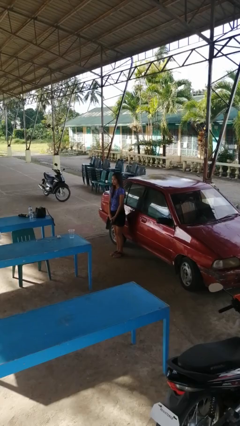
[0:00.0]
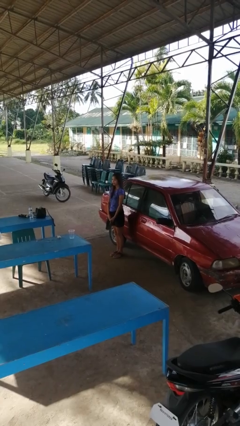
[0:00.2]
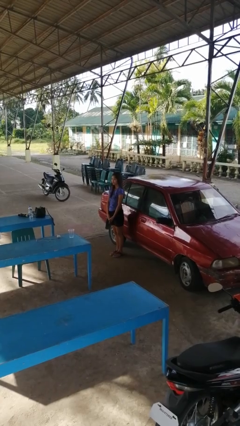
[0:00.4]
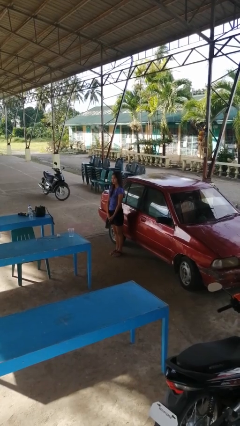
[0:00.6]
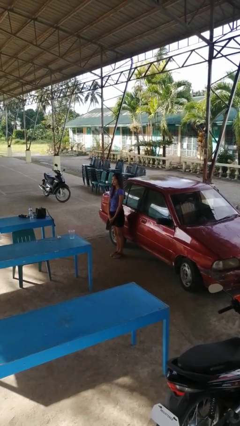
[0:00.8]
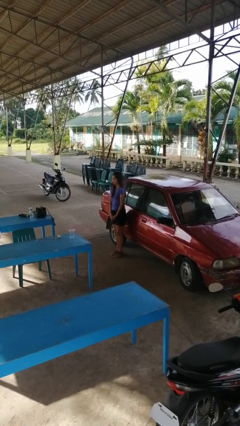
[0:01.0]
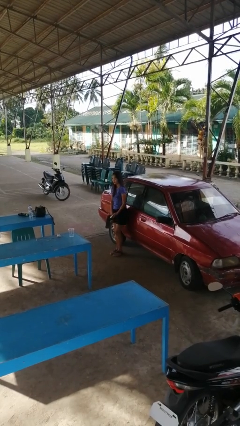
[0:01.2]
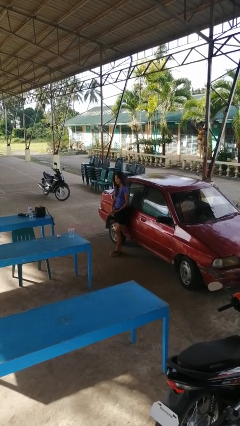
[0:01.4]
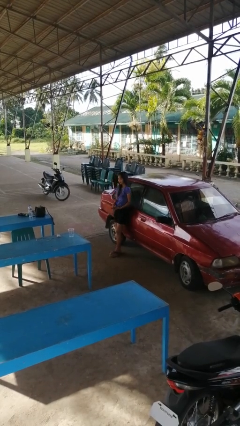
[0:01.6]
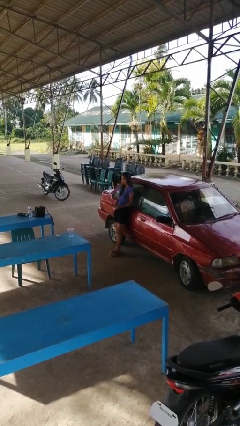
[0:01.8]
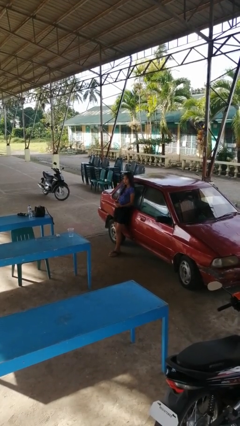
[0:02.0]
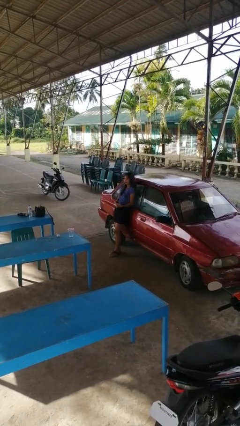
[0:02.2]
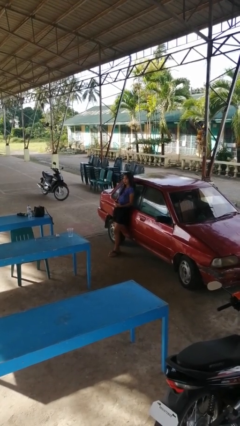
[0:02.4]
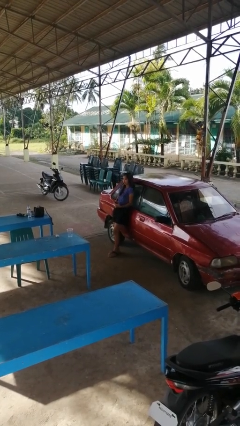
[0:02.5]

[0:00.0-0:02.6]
person leans against car

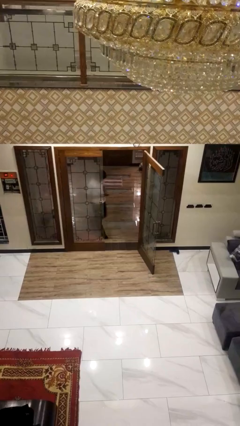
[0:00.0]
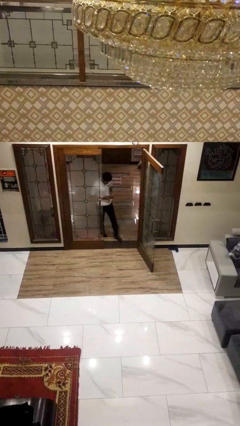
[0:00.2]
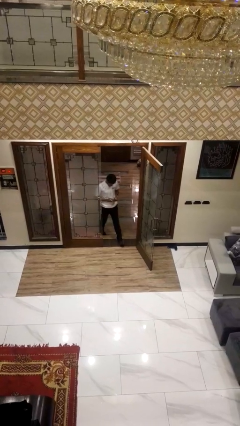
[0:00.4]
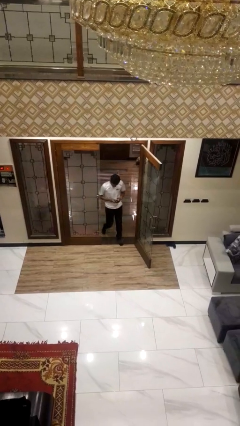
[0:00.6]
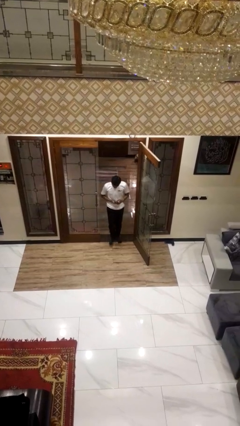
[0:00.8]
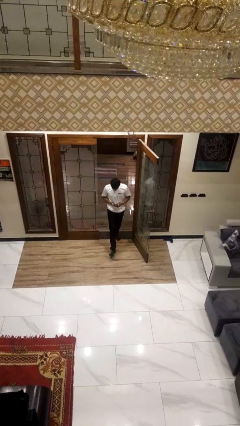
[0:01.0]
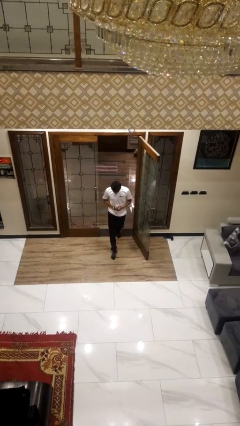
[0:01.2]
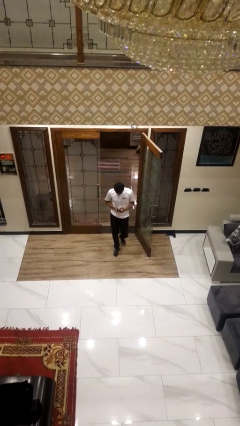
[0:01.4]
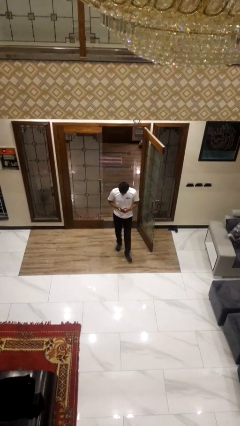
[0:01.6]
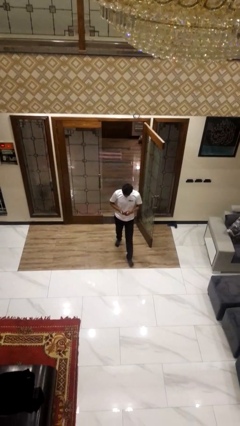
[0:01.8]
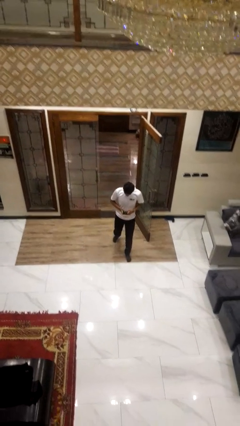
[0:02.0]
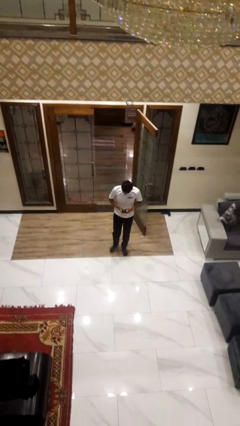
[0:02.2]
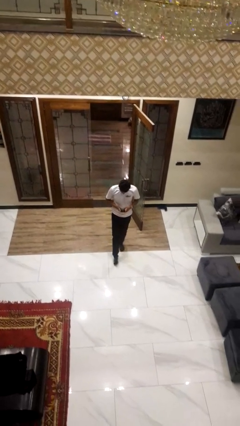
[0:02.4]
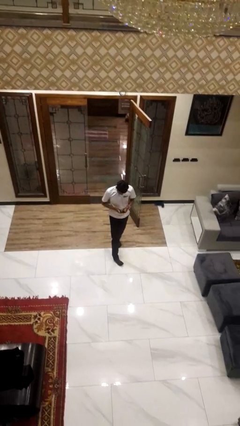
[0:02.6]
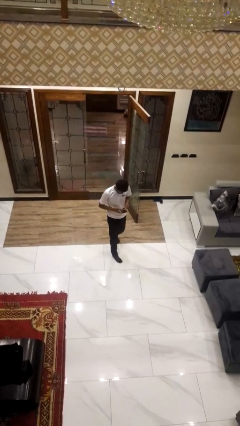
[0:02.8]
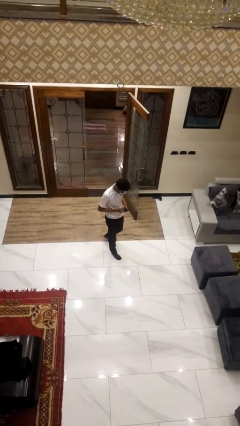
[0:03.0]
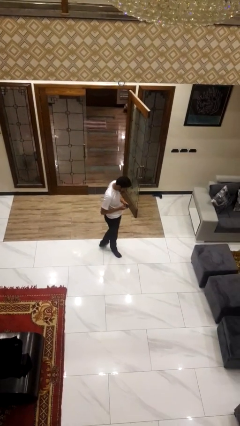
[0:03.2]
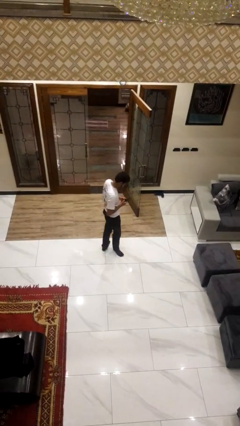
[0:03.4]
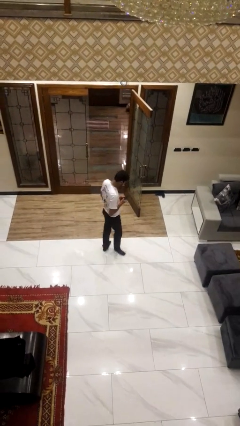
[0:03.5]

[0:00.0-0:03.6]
person enters scene through structure

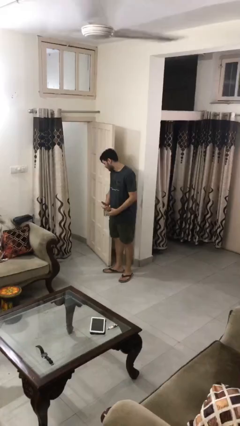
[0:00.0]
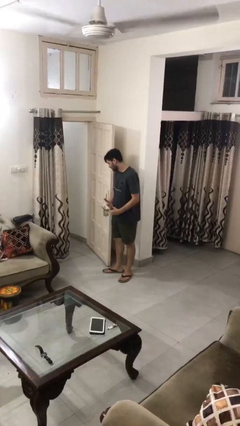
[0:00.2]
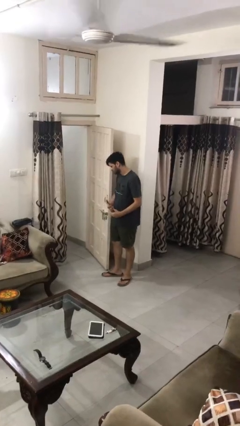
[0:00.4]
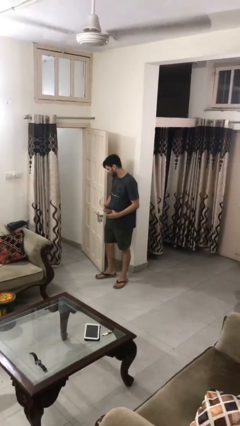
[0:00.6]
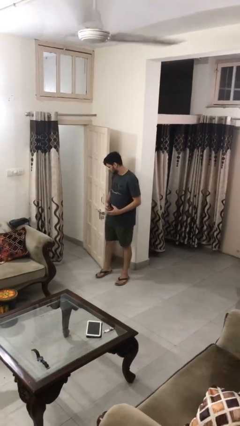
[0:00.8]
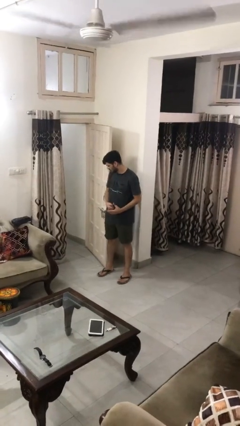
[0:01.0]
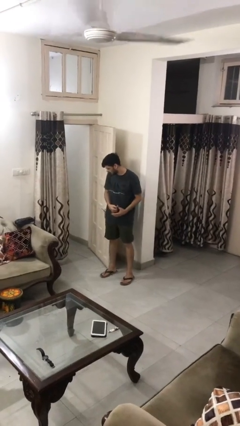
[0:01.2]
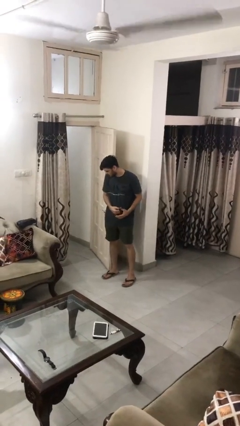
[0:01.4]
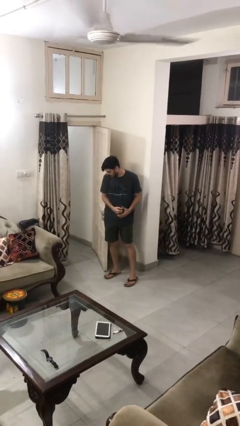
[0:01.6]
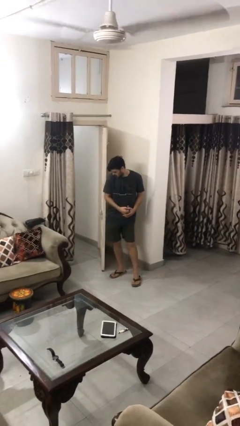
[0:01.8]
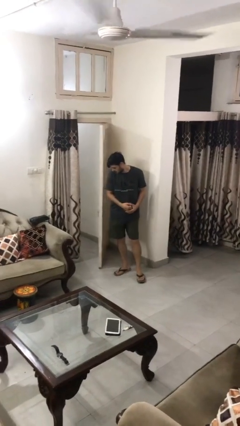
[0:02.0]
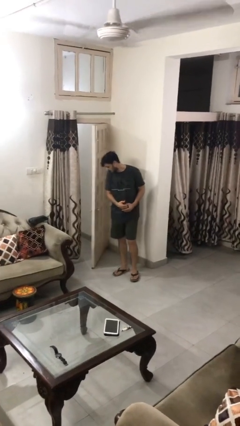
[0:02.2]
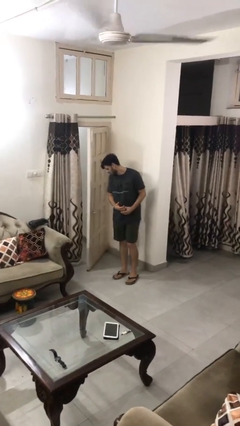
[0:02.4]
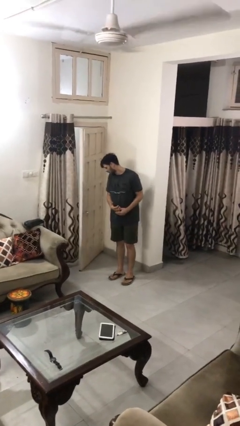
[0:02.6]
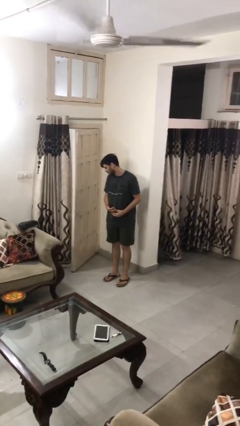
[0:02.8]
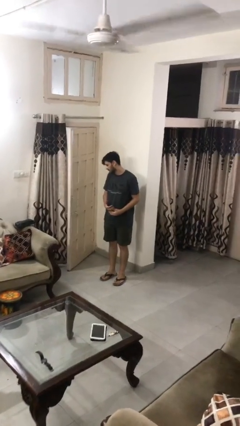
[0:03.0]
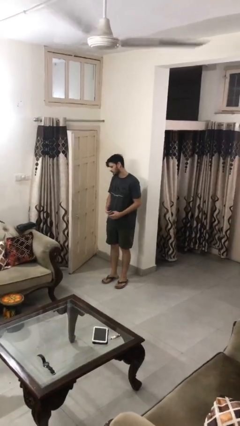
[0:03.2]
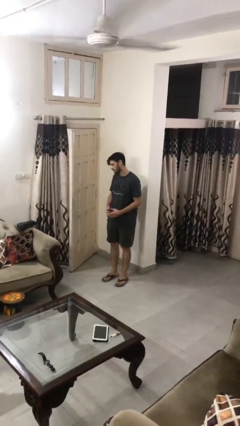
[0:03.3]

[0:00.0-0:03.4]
person closes door with hip

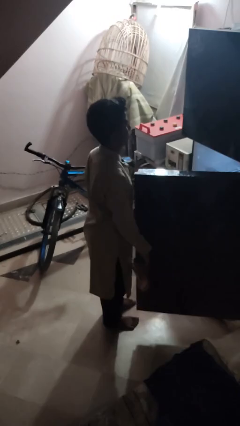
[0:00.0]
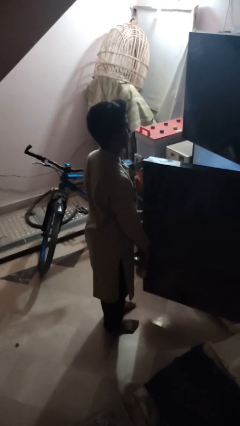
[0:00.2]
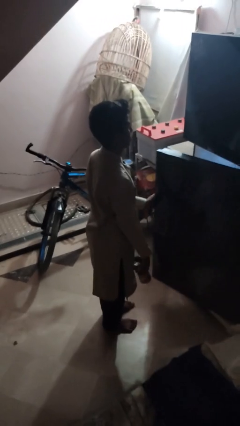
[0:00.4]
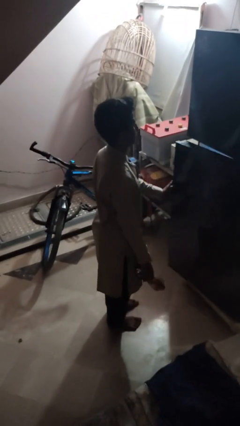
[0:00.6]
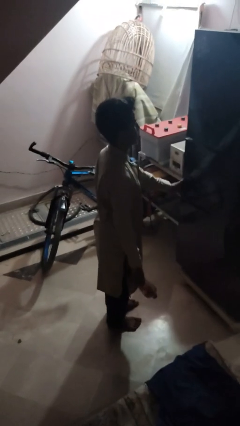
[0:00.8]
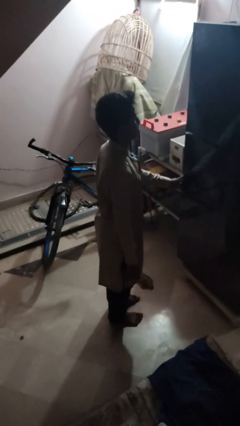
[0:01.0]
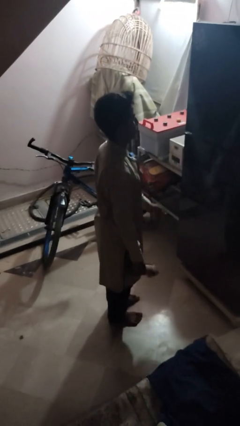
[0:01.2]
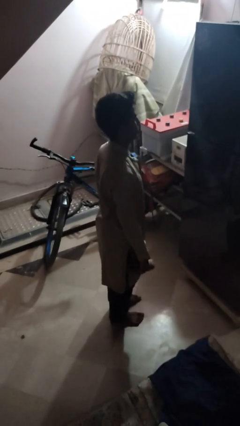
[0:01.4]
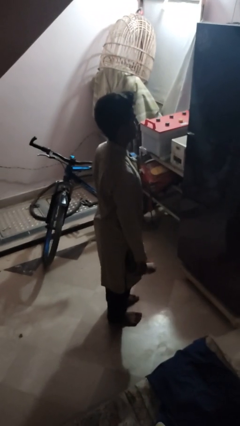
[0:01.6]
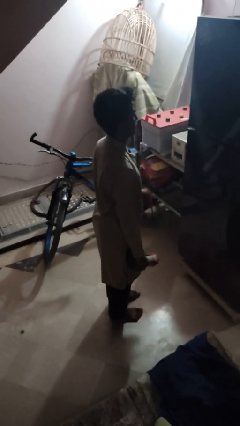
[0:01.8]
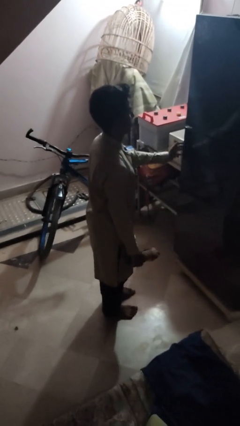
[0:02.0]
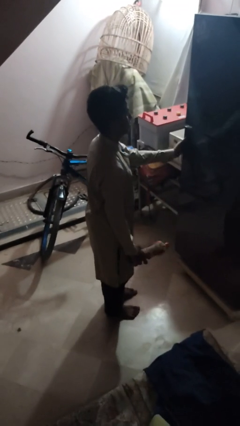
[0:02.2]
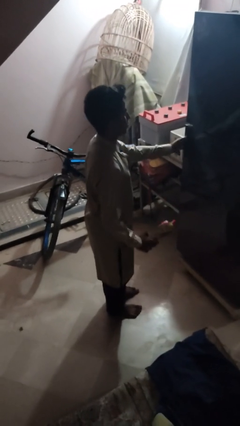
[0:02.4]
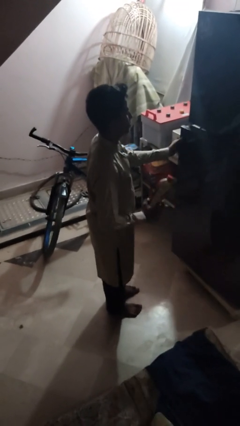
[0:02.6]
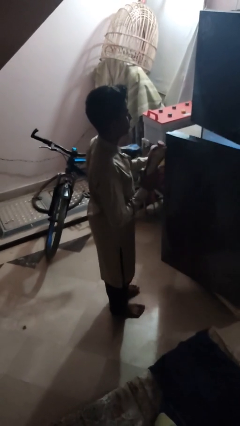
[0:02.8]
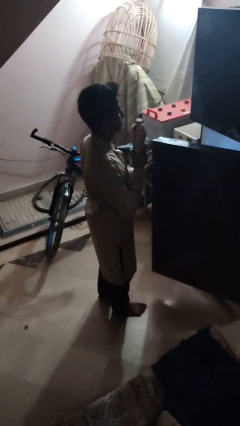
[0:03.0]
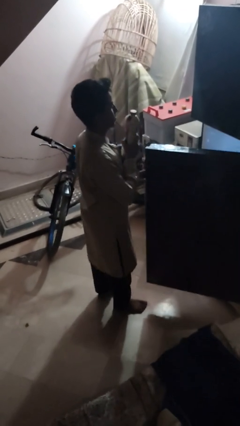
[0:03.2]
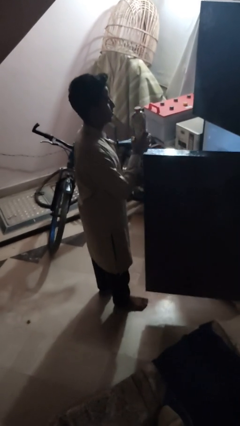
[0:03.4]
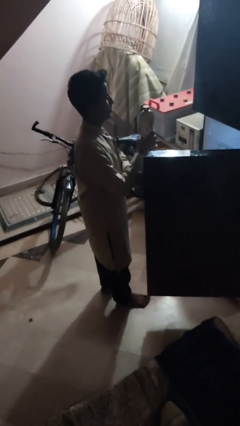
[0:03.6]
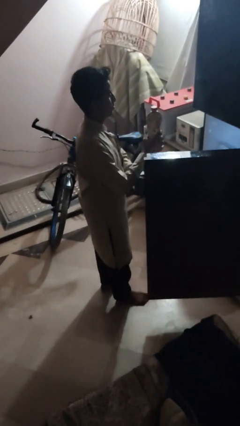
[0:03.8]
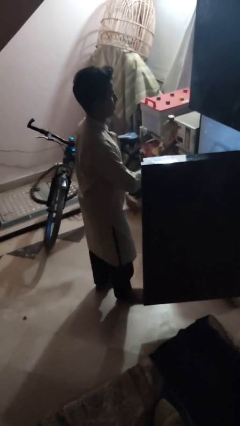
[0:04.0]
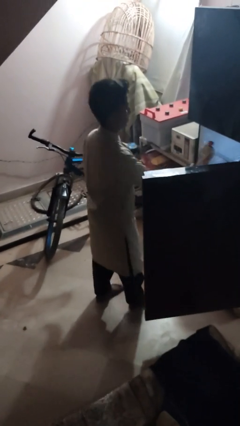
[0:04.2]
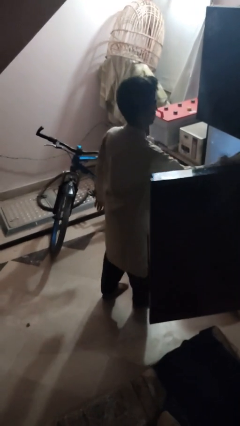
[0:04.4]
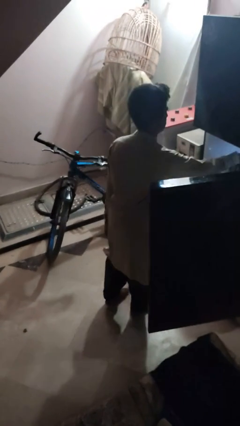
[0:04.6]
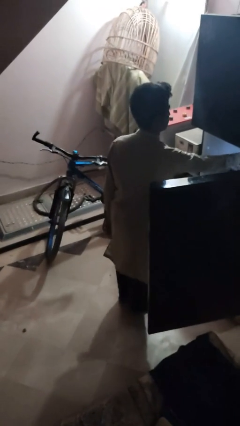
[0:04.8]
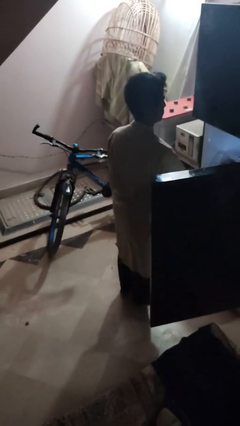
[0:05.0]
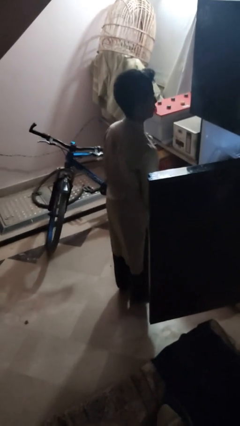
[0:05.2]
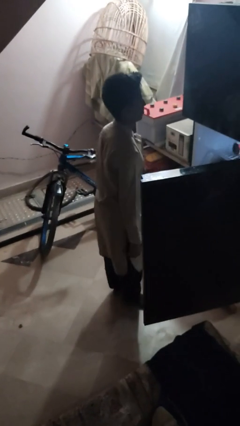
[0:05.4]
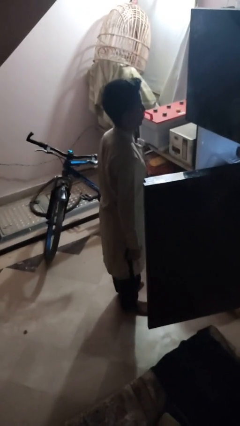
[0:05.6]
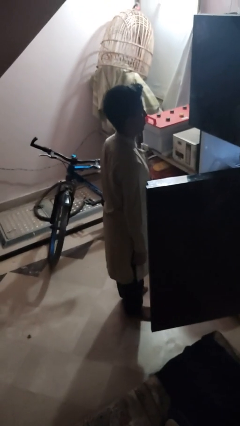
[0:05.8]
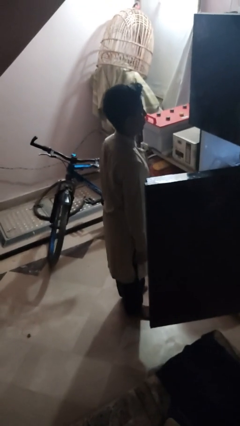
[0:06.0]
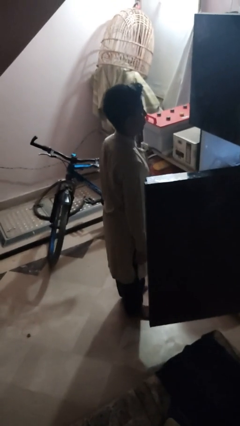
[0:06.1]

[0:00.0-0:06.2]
person puts object into refrigerator

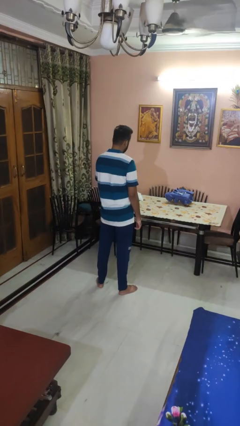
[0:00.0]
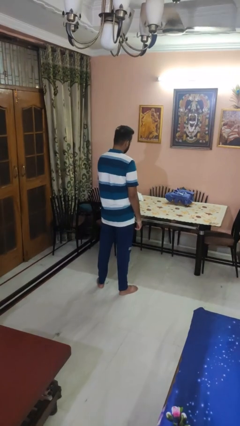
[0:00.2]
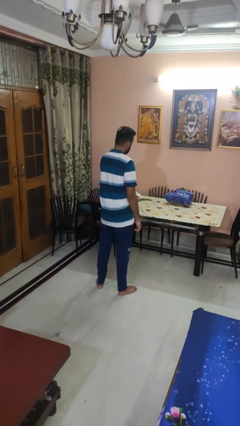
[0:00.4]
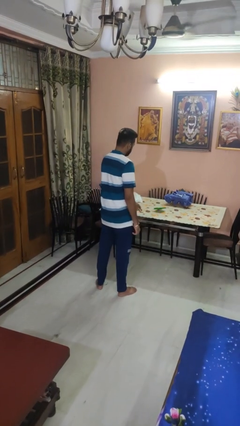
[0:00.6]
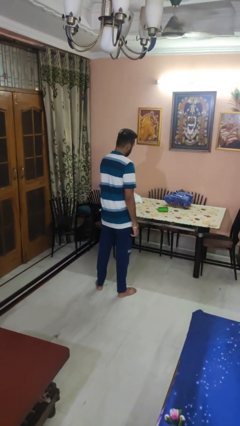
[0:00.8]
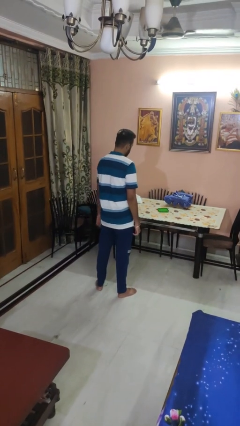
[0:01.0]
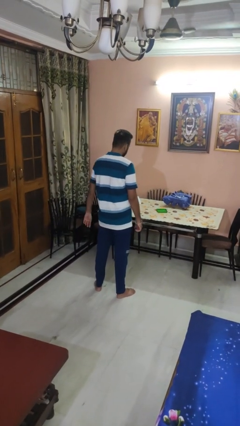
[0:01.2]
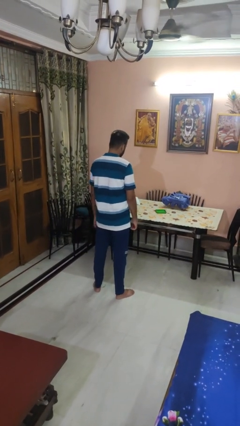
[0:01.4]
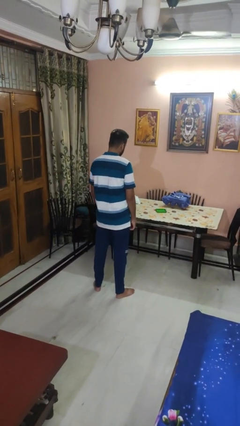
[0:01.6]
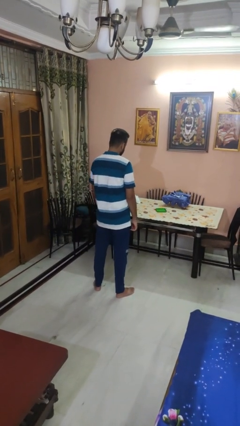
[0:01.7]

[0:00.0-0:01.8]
person throws object on table
